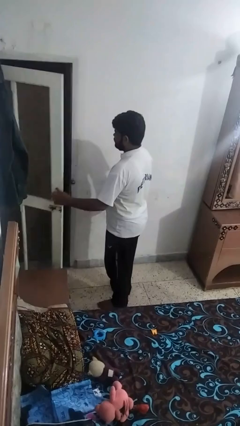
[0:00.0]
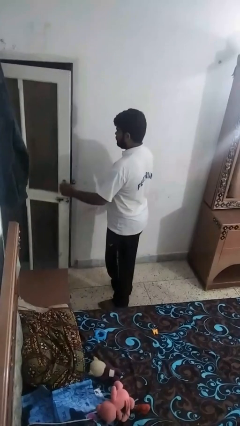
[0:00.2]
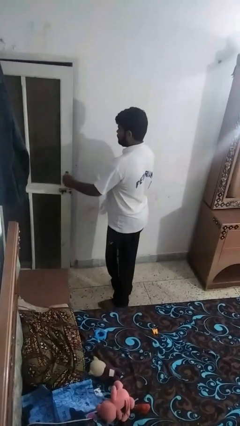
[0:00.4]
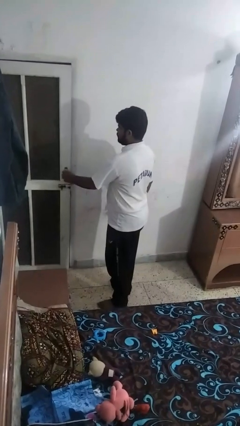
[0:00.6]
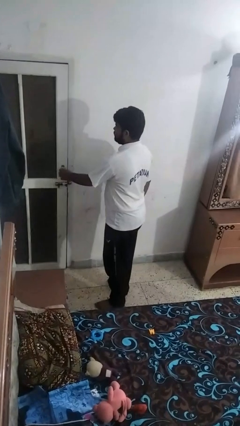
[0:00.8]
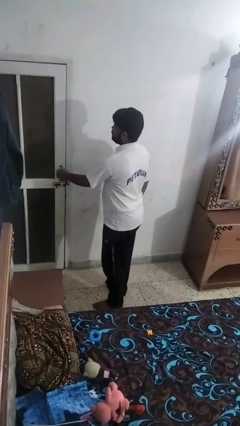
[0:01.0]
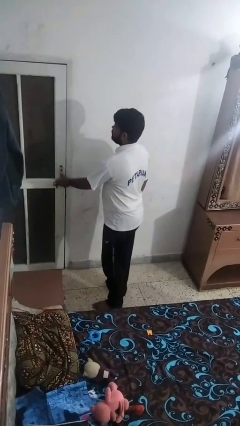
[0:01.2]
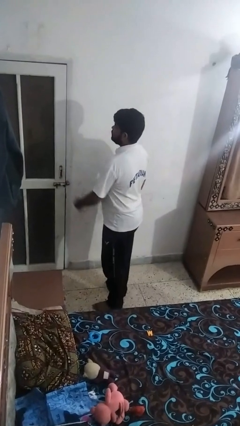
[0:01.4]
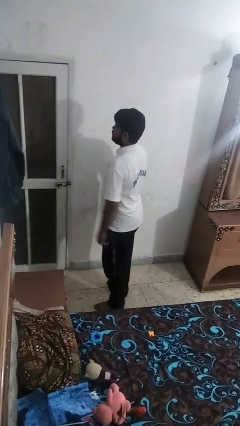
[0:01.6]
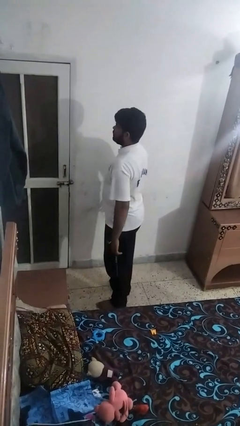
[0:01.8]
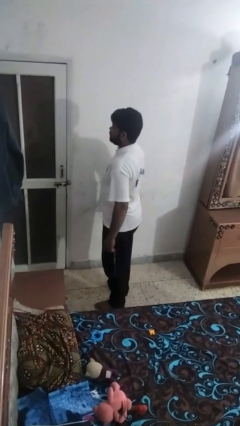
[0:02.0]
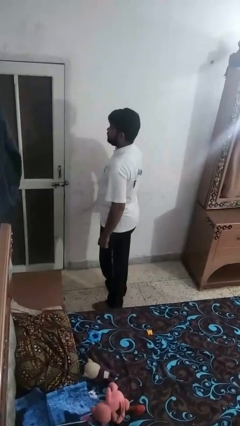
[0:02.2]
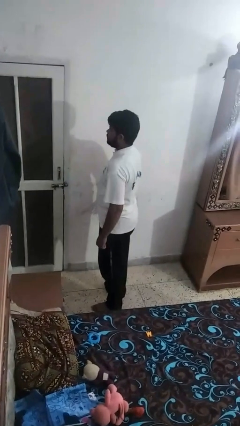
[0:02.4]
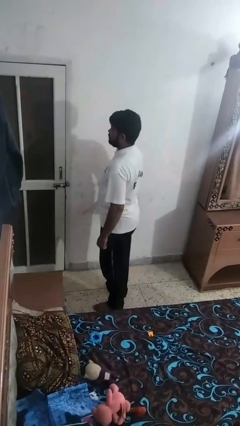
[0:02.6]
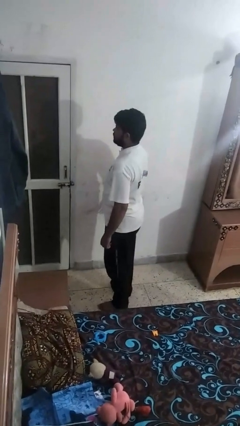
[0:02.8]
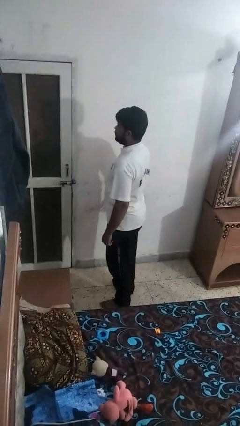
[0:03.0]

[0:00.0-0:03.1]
person closes gate

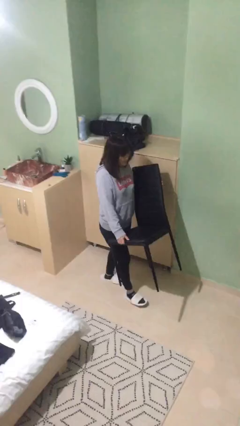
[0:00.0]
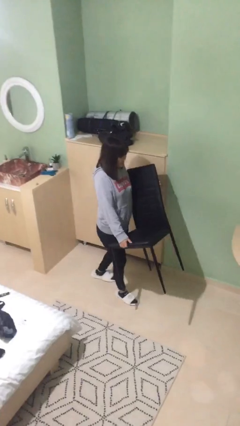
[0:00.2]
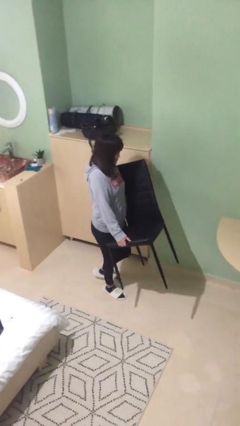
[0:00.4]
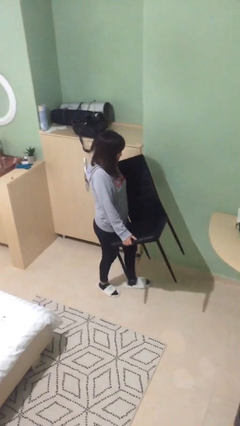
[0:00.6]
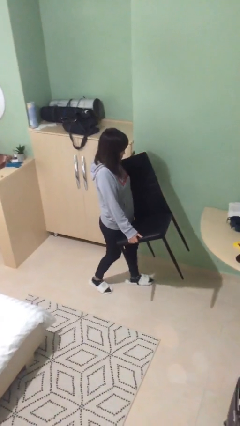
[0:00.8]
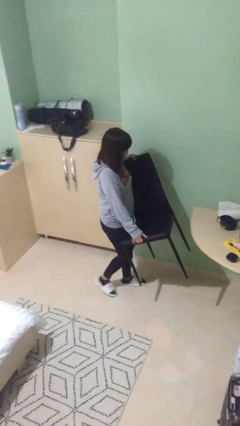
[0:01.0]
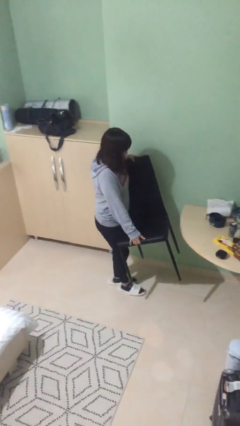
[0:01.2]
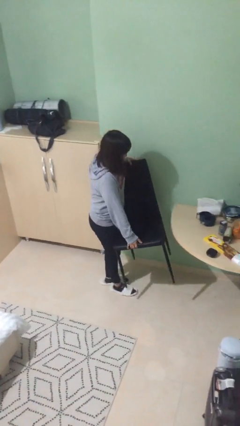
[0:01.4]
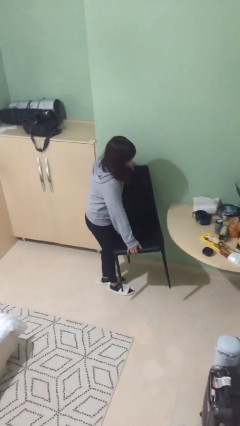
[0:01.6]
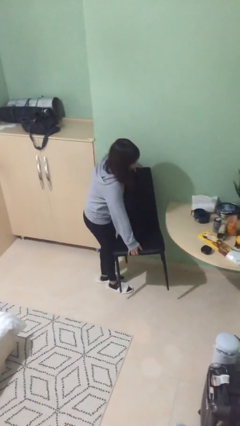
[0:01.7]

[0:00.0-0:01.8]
person carries heavy object

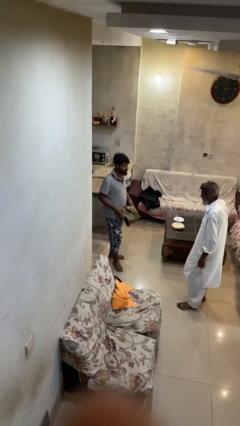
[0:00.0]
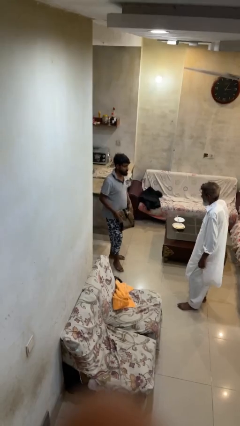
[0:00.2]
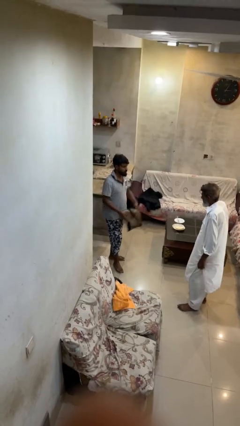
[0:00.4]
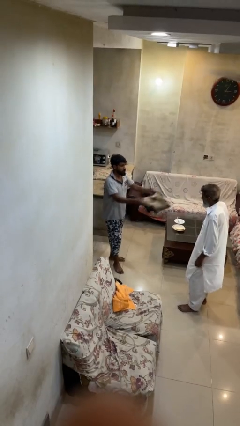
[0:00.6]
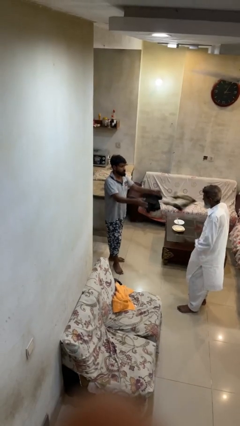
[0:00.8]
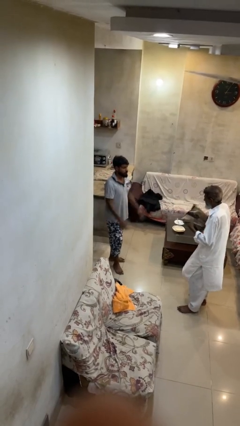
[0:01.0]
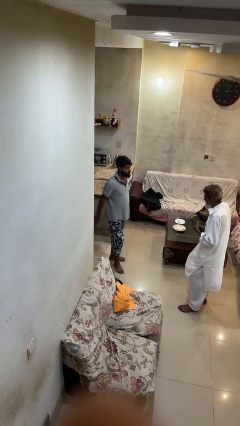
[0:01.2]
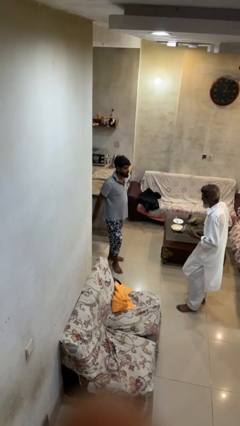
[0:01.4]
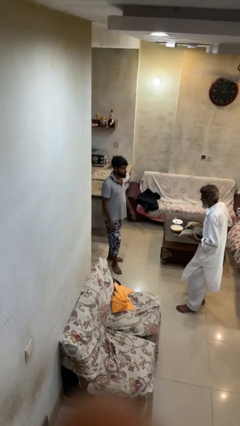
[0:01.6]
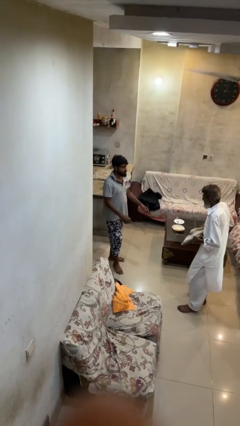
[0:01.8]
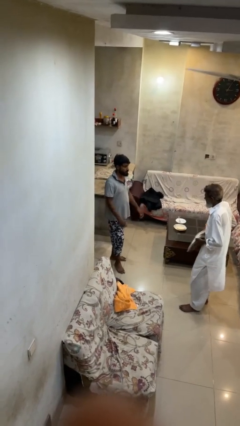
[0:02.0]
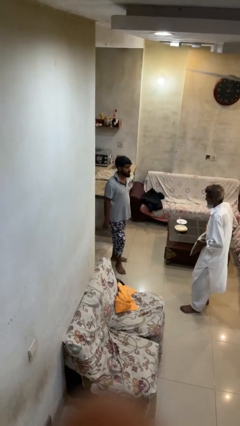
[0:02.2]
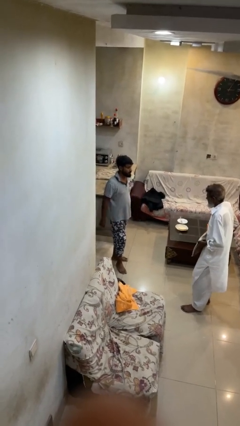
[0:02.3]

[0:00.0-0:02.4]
person throws object to person

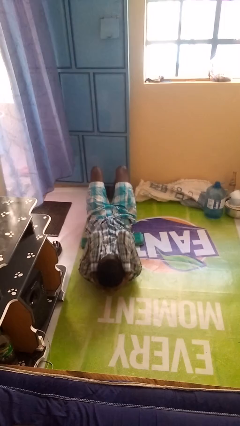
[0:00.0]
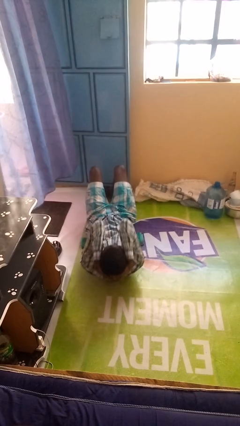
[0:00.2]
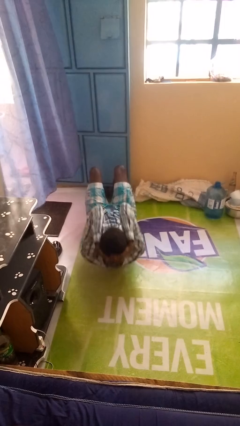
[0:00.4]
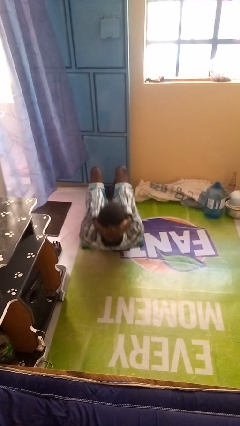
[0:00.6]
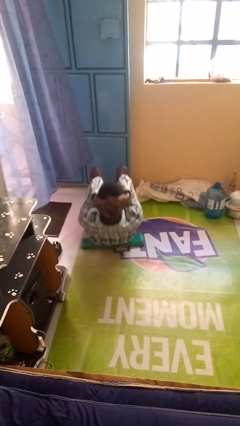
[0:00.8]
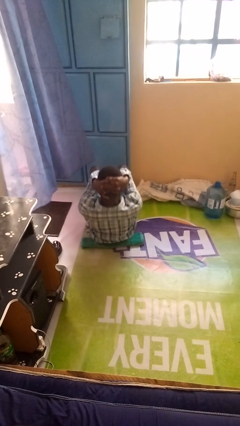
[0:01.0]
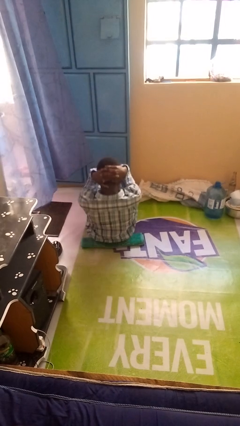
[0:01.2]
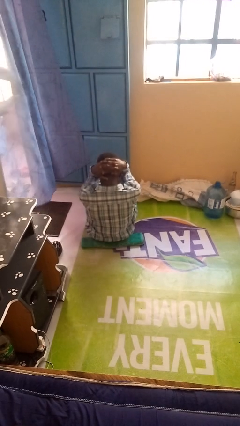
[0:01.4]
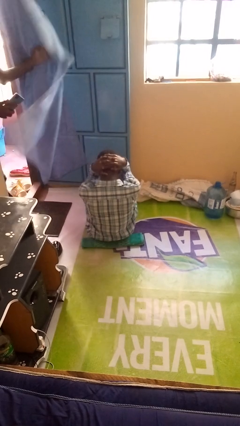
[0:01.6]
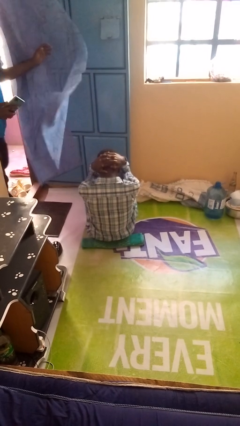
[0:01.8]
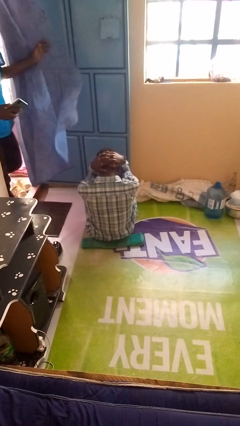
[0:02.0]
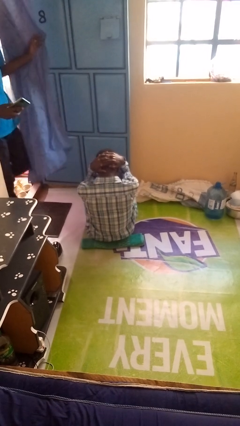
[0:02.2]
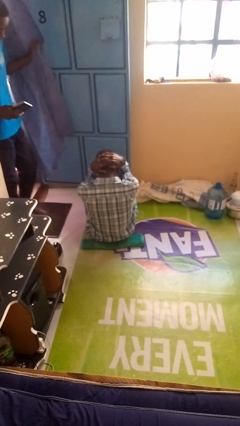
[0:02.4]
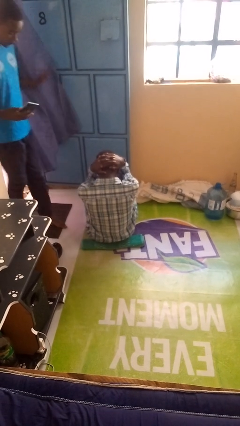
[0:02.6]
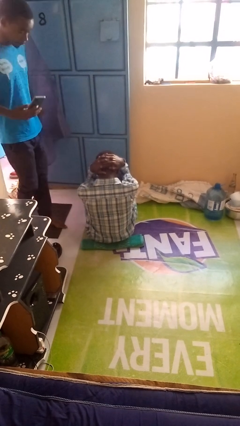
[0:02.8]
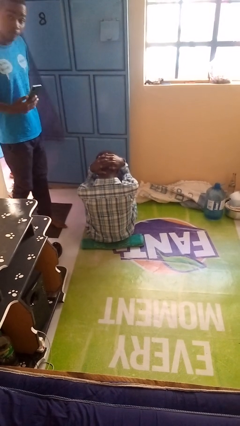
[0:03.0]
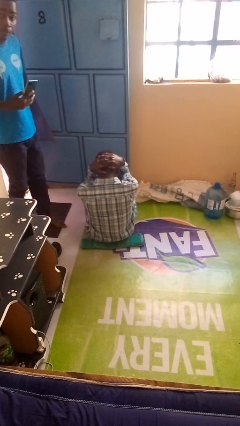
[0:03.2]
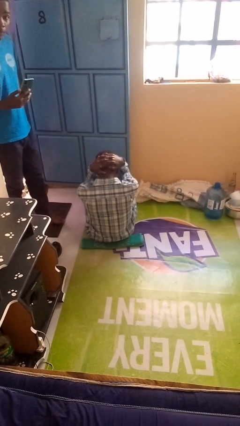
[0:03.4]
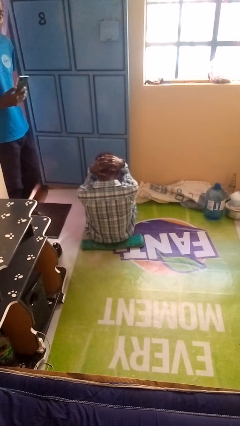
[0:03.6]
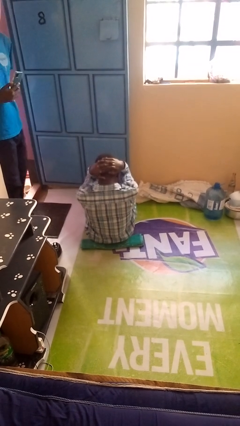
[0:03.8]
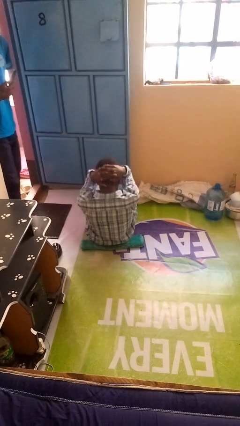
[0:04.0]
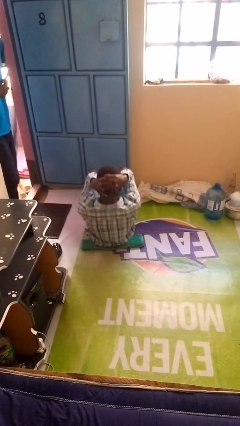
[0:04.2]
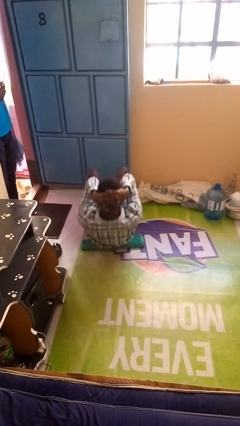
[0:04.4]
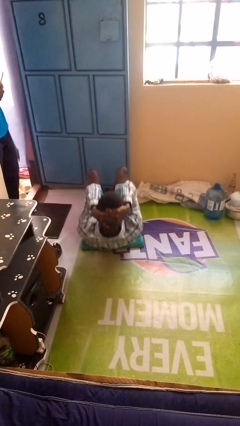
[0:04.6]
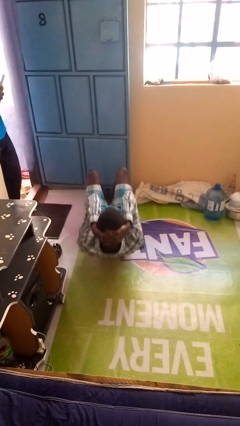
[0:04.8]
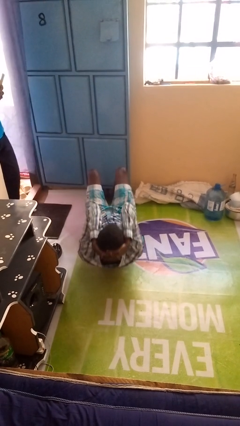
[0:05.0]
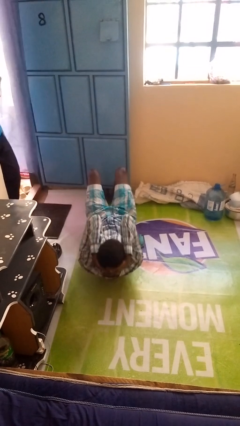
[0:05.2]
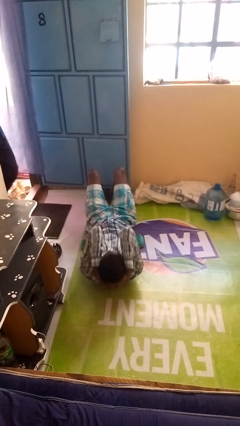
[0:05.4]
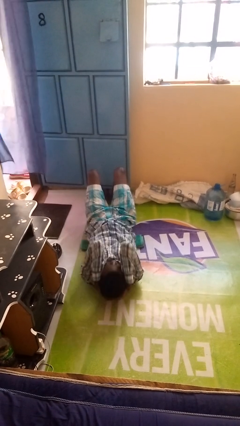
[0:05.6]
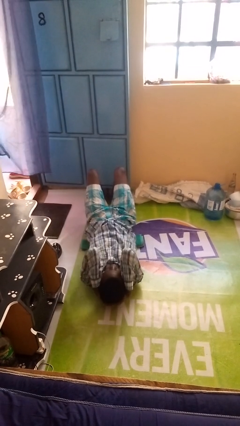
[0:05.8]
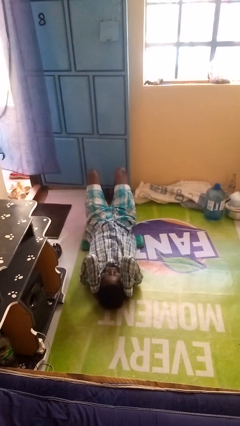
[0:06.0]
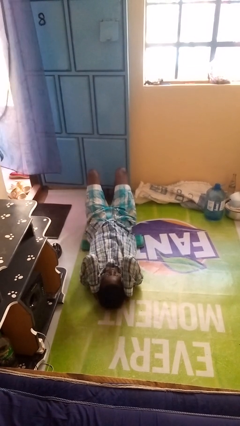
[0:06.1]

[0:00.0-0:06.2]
person exercises with situp

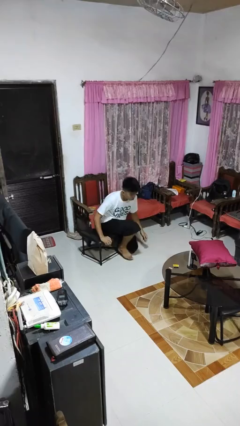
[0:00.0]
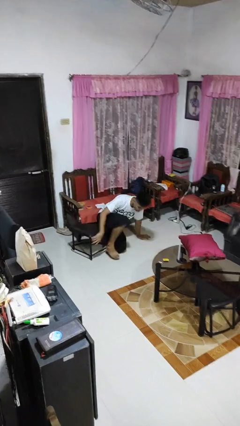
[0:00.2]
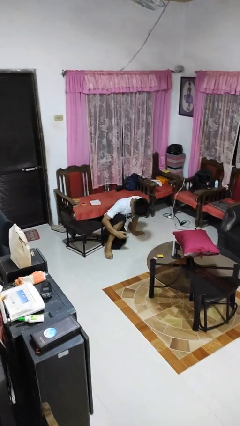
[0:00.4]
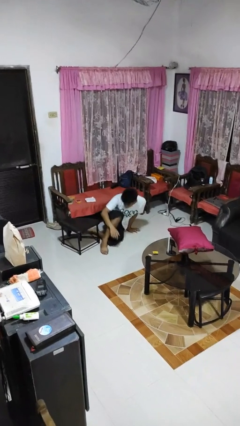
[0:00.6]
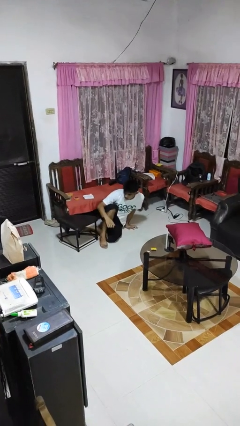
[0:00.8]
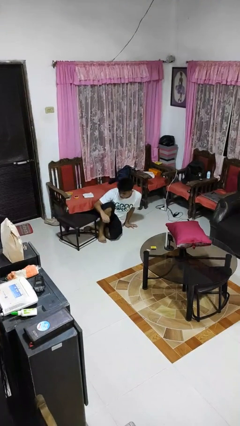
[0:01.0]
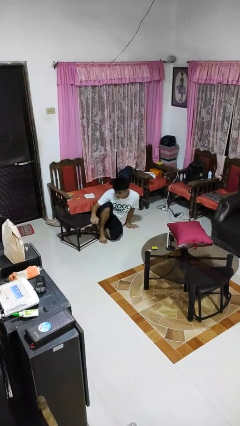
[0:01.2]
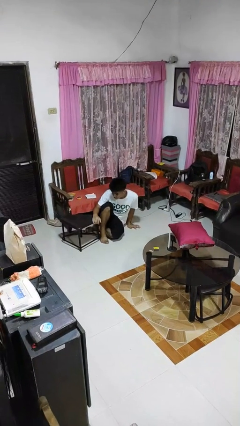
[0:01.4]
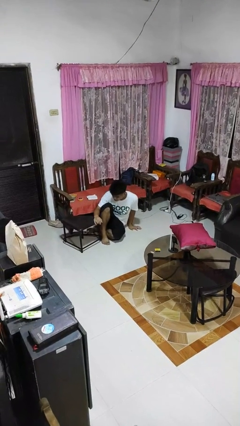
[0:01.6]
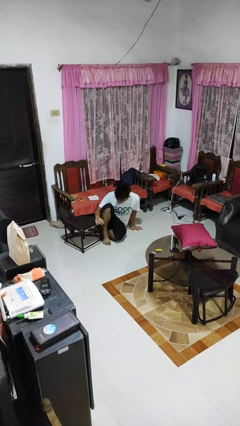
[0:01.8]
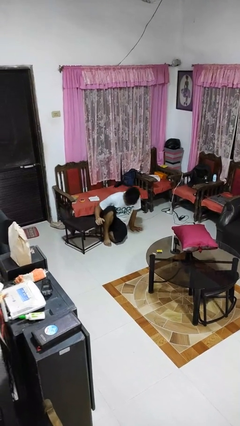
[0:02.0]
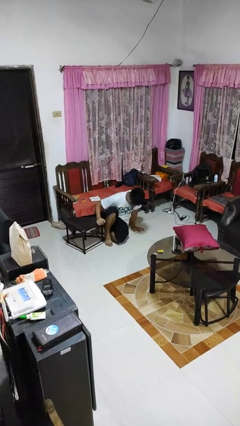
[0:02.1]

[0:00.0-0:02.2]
person falls from chair

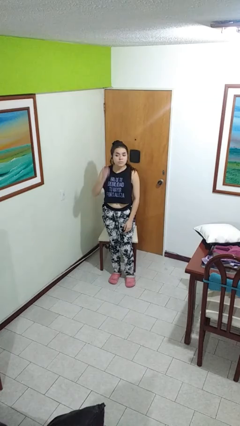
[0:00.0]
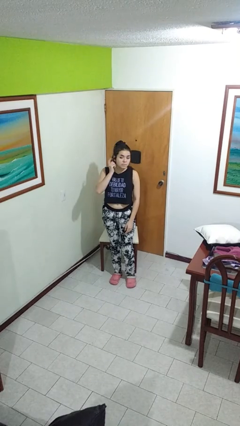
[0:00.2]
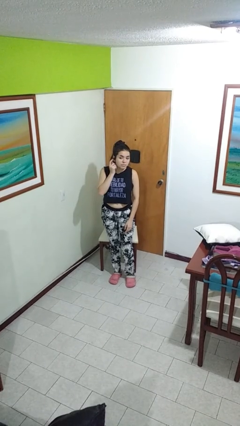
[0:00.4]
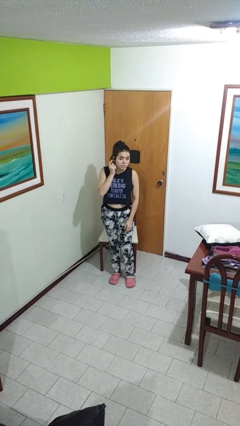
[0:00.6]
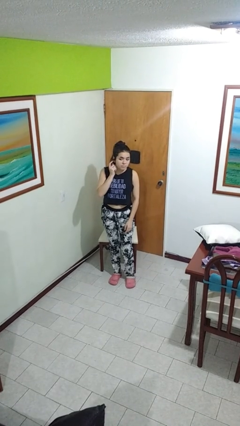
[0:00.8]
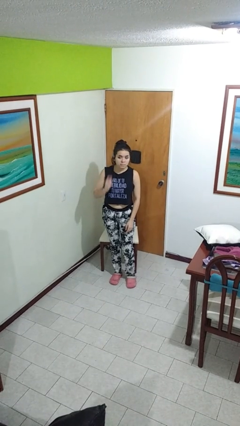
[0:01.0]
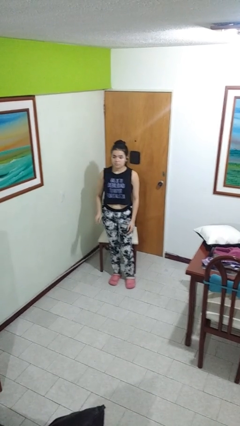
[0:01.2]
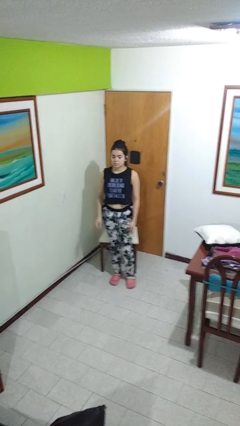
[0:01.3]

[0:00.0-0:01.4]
person gestures listen closely
